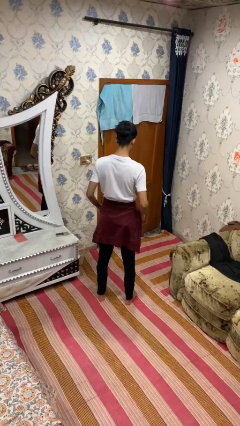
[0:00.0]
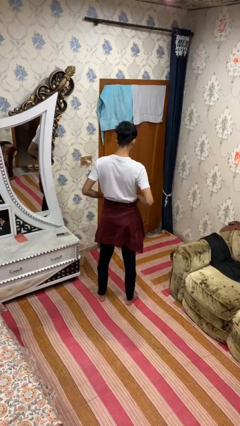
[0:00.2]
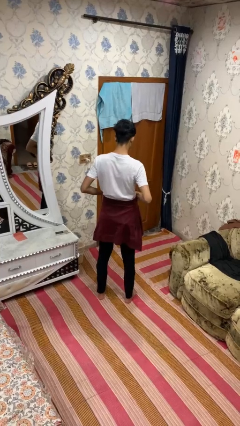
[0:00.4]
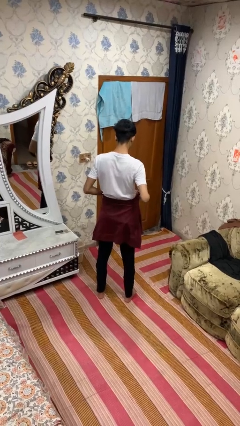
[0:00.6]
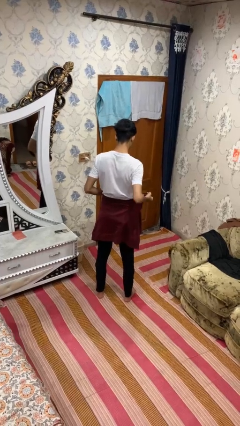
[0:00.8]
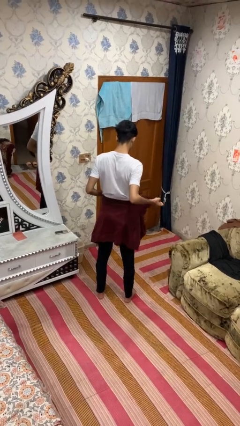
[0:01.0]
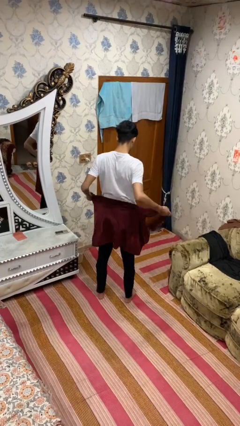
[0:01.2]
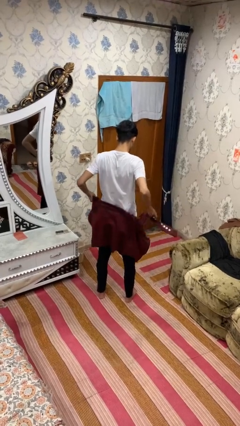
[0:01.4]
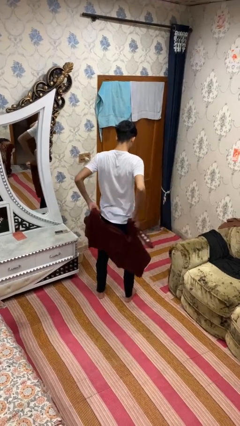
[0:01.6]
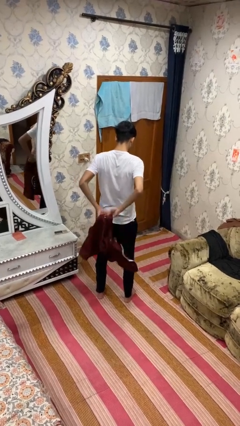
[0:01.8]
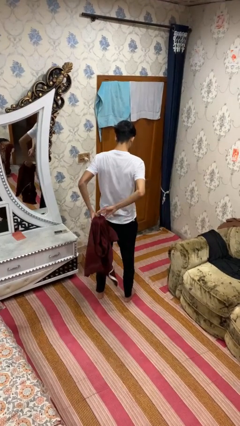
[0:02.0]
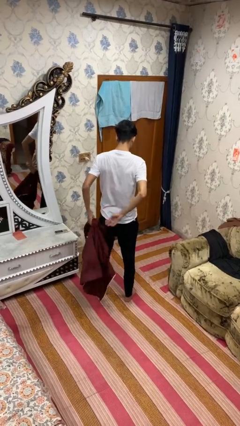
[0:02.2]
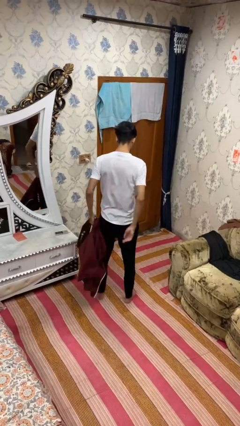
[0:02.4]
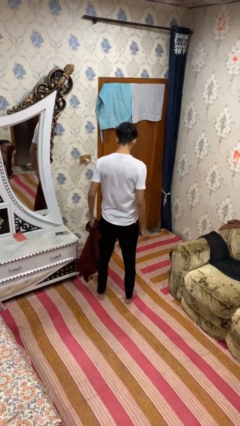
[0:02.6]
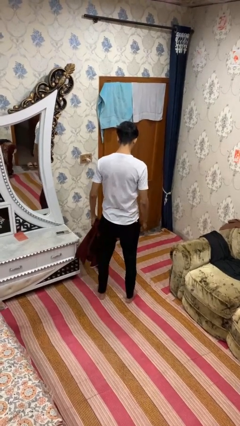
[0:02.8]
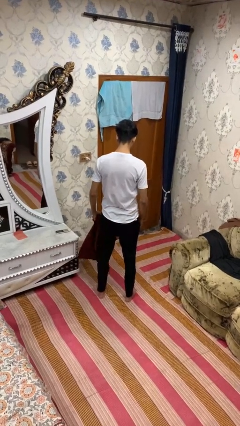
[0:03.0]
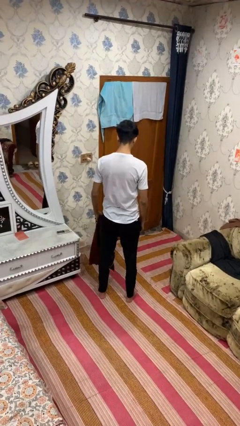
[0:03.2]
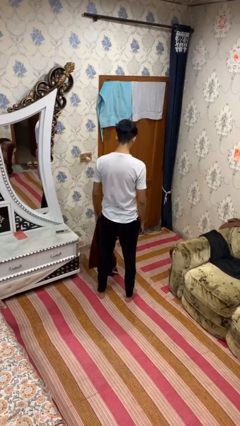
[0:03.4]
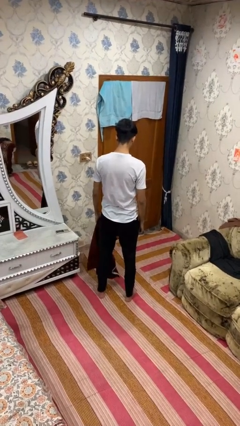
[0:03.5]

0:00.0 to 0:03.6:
person unties jacket around waist

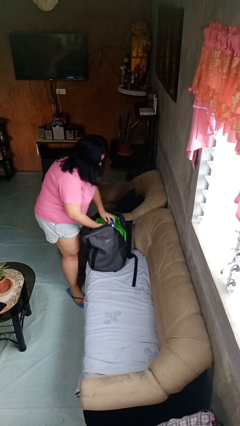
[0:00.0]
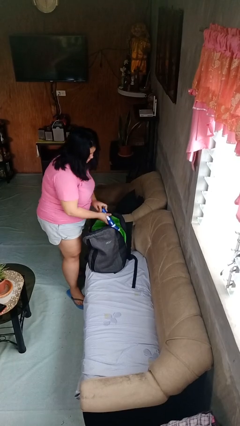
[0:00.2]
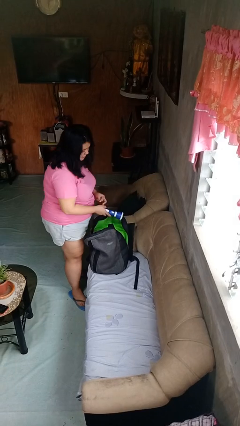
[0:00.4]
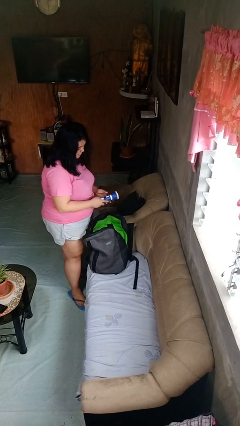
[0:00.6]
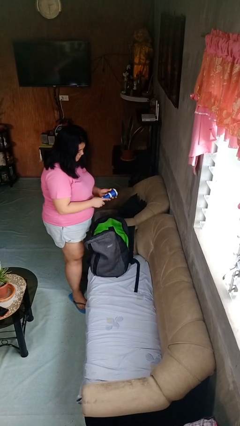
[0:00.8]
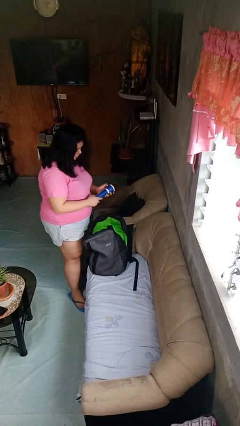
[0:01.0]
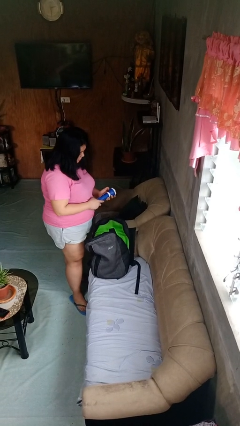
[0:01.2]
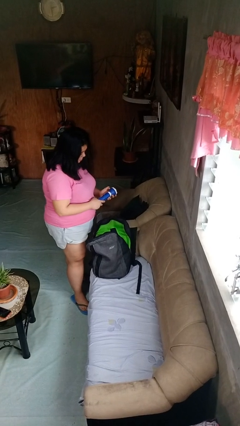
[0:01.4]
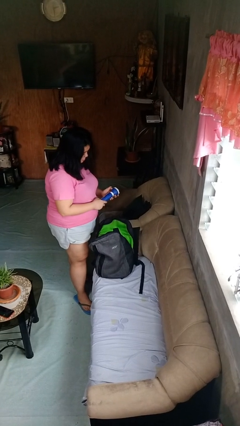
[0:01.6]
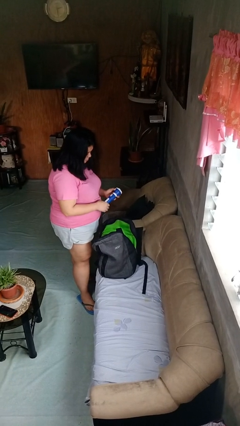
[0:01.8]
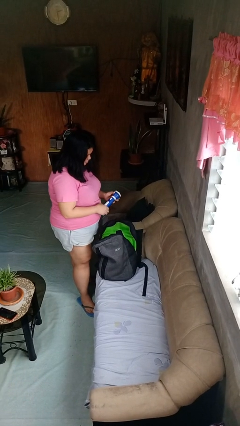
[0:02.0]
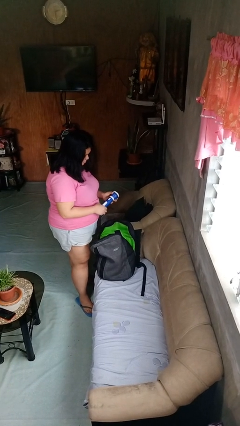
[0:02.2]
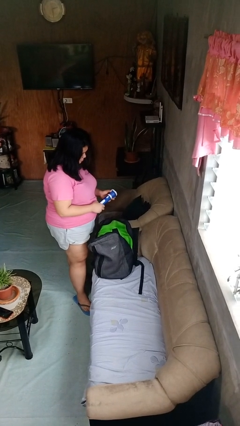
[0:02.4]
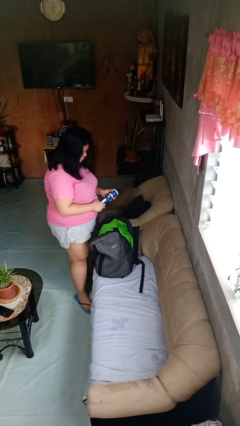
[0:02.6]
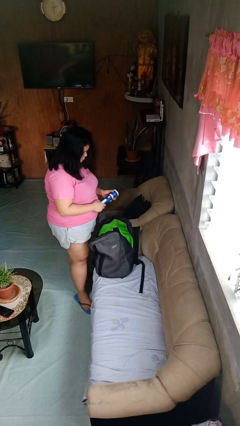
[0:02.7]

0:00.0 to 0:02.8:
person takes object from backpack

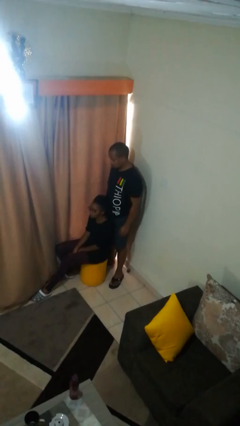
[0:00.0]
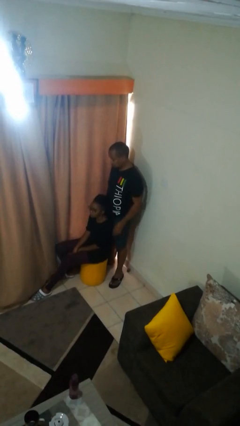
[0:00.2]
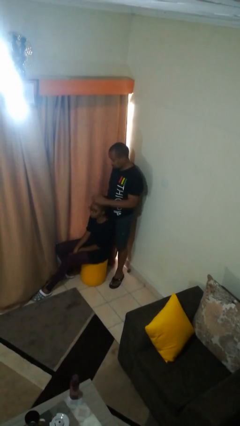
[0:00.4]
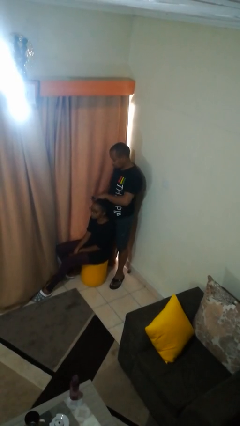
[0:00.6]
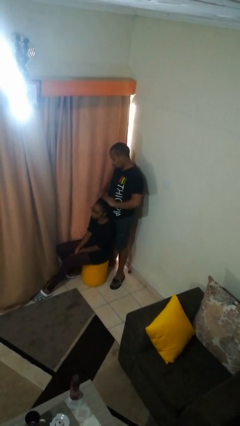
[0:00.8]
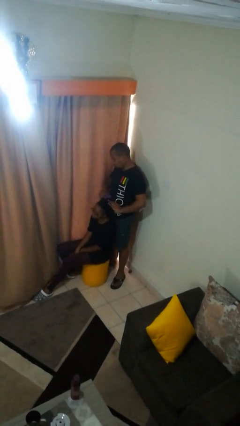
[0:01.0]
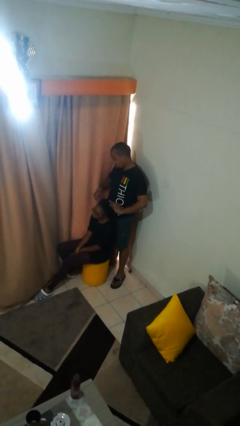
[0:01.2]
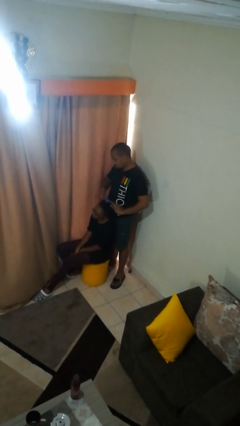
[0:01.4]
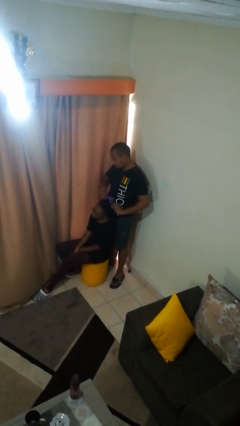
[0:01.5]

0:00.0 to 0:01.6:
person brushes hair of person

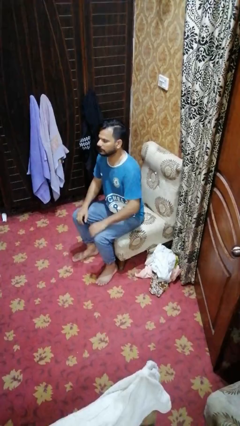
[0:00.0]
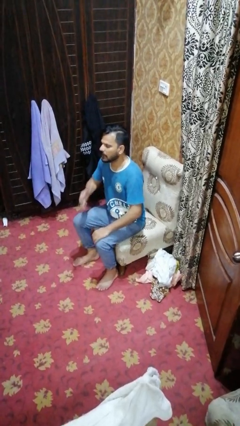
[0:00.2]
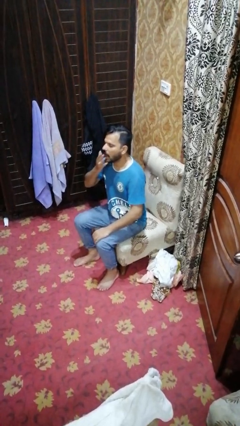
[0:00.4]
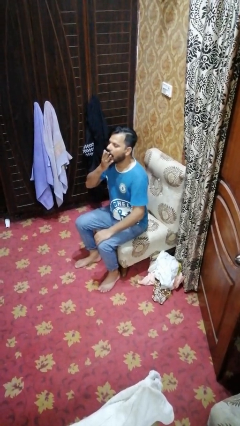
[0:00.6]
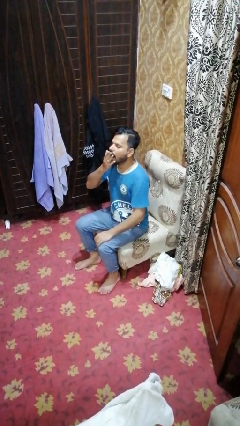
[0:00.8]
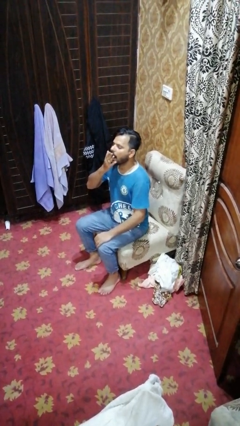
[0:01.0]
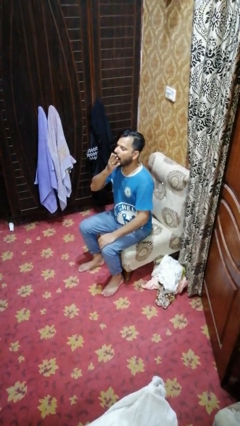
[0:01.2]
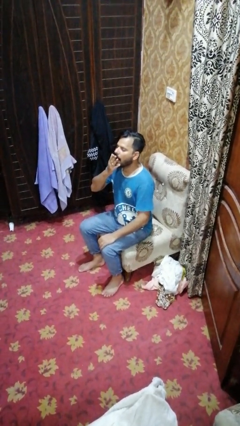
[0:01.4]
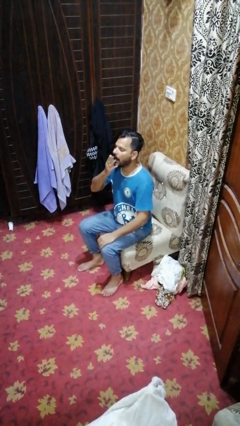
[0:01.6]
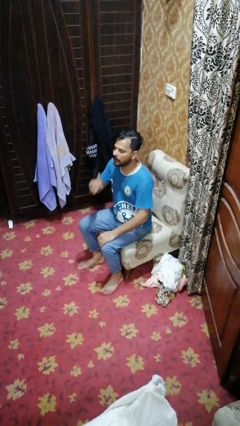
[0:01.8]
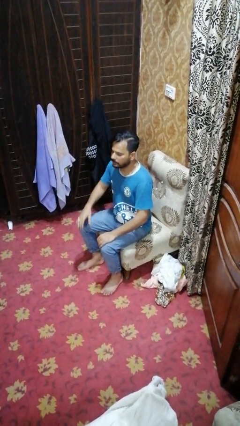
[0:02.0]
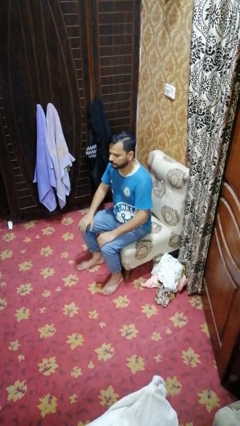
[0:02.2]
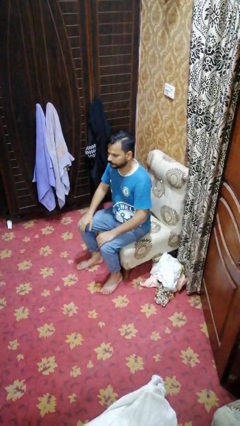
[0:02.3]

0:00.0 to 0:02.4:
person yawns

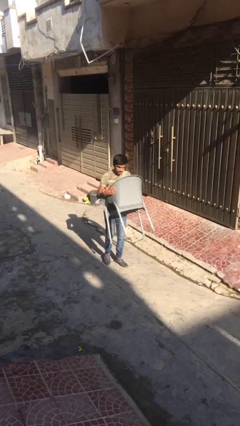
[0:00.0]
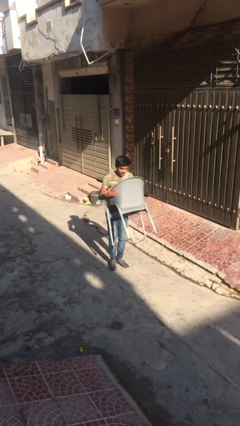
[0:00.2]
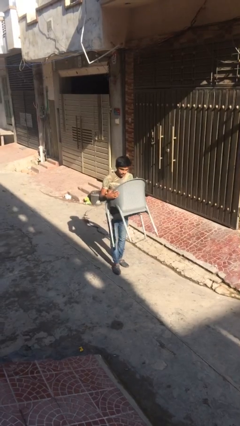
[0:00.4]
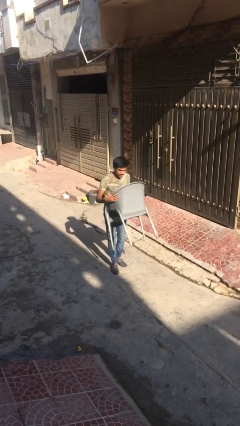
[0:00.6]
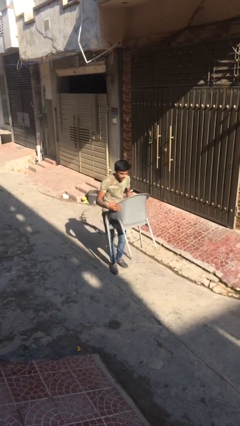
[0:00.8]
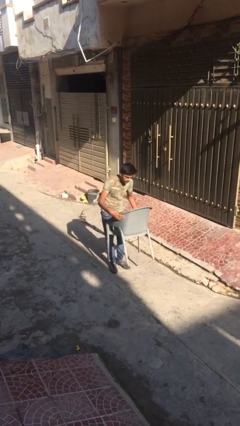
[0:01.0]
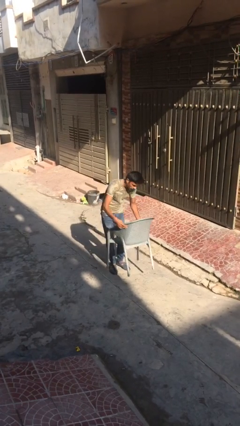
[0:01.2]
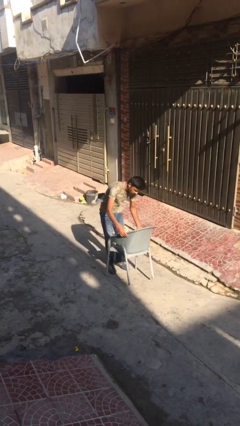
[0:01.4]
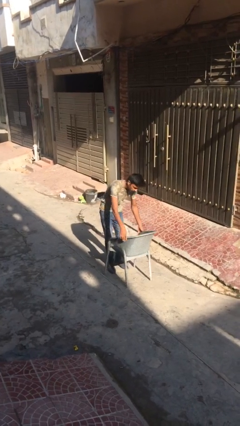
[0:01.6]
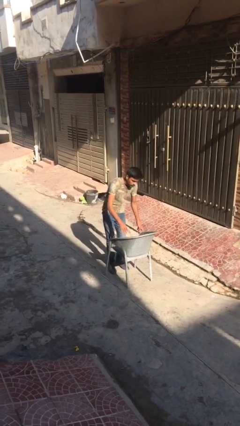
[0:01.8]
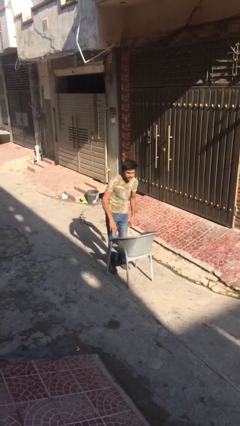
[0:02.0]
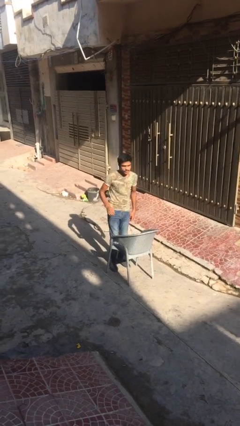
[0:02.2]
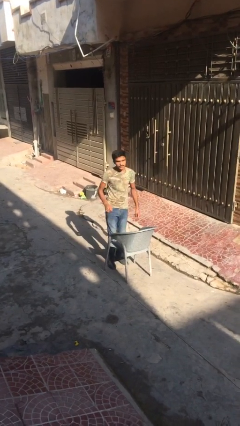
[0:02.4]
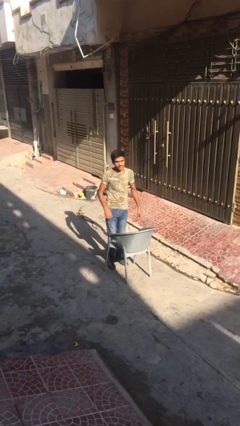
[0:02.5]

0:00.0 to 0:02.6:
person puts down object on floor

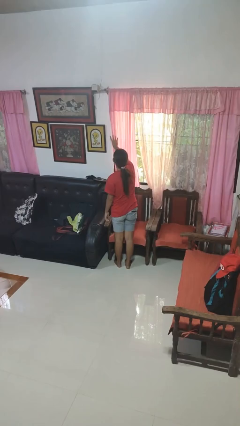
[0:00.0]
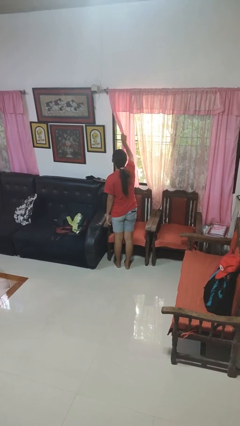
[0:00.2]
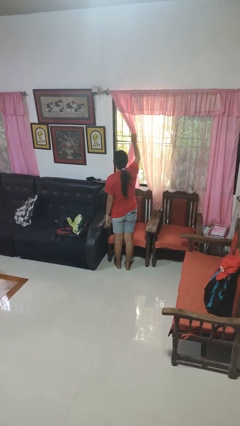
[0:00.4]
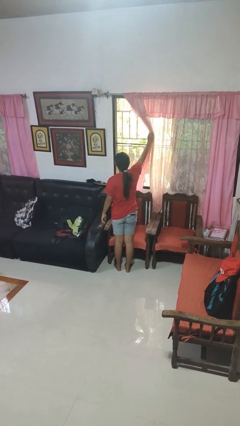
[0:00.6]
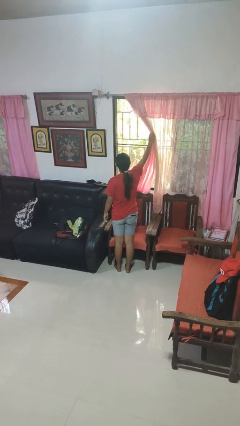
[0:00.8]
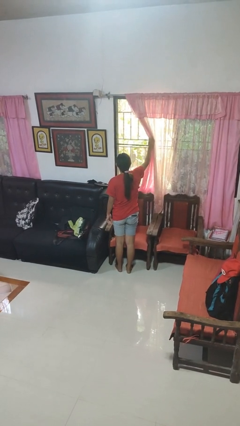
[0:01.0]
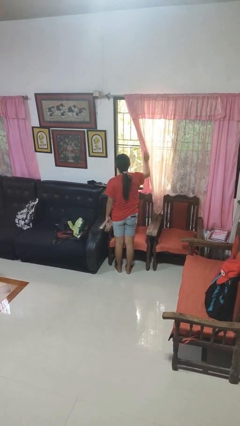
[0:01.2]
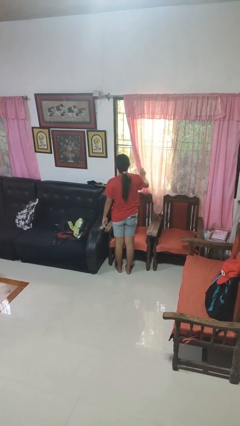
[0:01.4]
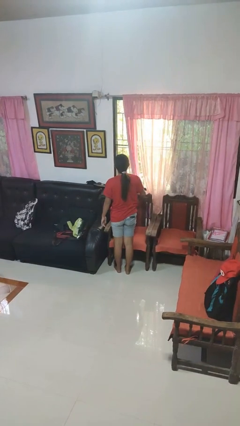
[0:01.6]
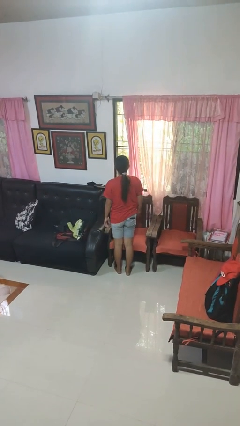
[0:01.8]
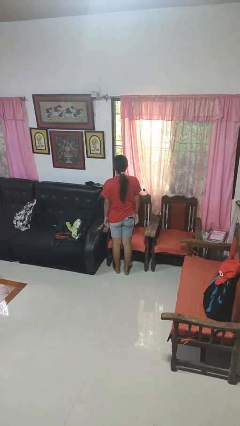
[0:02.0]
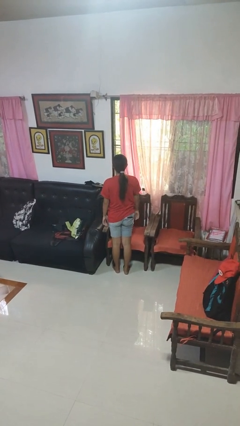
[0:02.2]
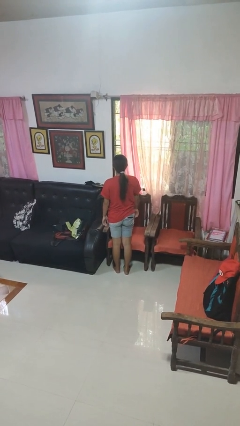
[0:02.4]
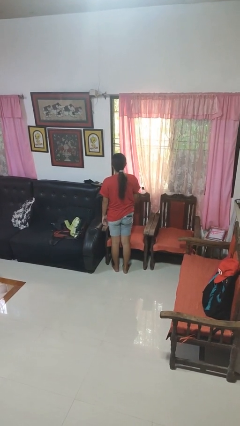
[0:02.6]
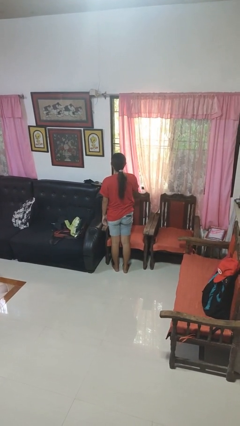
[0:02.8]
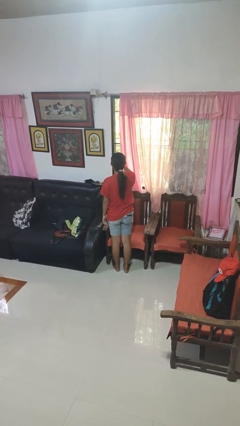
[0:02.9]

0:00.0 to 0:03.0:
person opens curtains

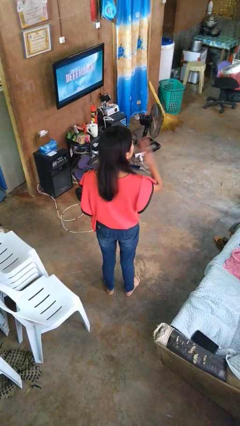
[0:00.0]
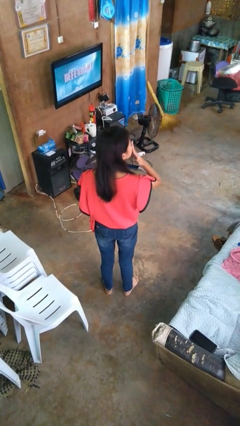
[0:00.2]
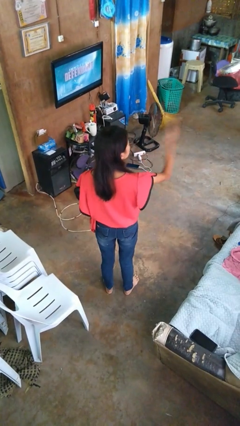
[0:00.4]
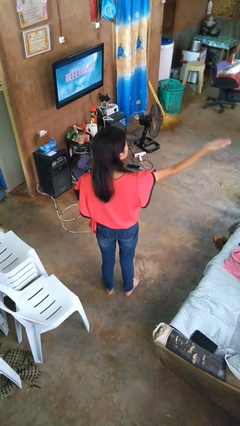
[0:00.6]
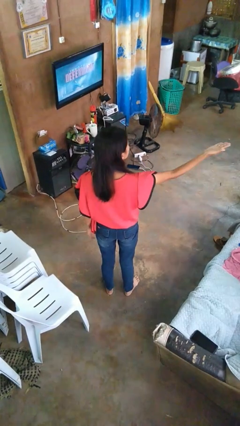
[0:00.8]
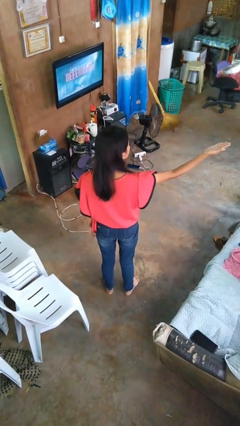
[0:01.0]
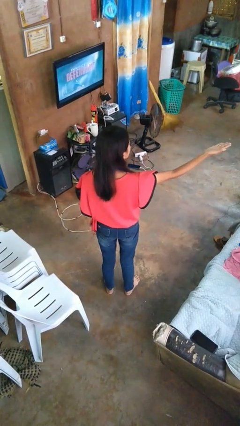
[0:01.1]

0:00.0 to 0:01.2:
person gestures blow kiss
